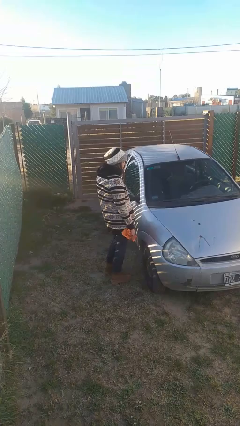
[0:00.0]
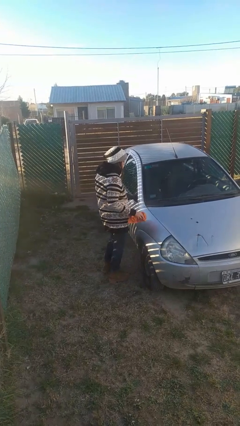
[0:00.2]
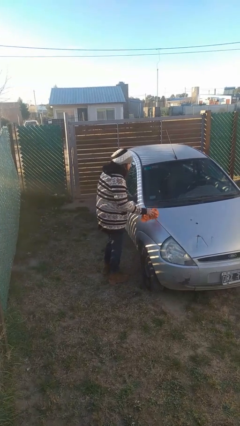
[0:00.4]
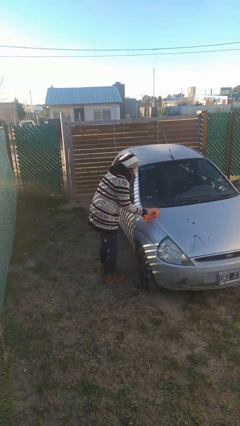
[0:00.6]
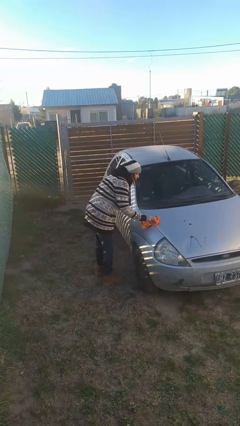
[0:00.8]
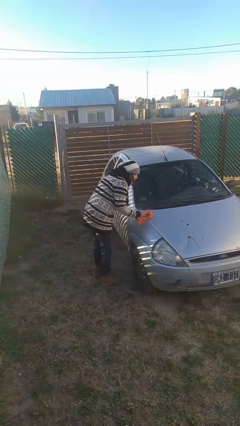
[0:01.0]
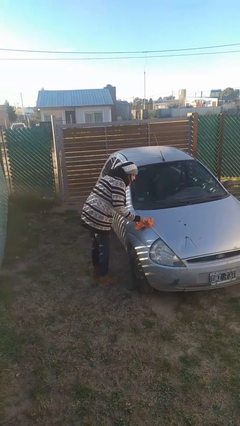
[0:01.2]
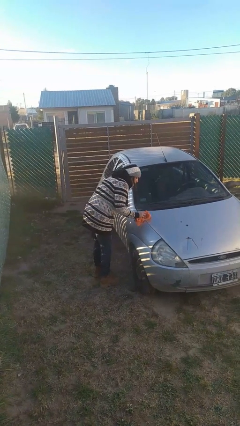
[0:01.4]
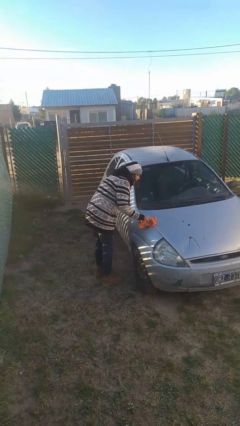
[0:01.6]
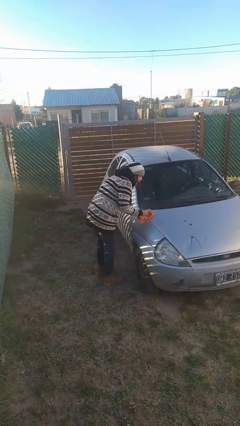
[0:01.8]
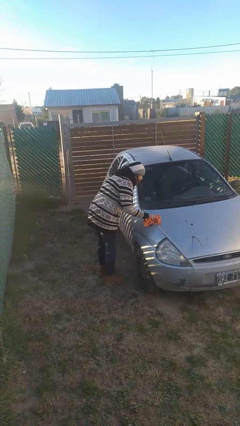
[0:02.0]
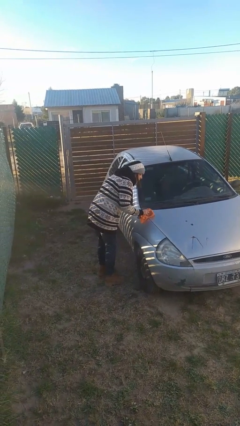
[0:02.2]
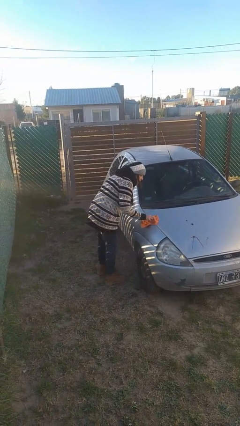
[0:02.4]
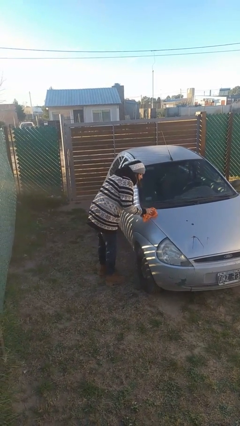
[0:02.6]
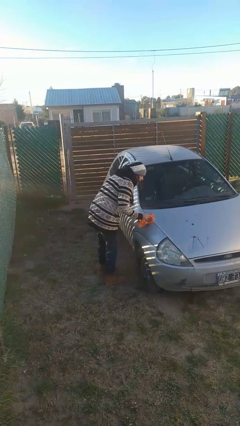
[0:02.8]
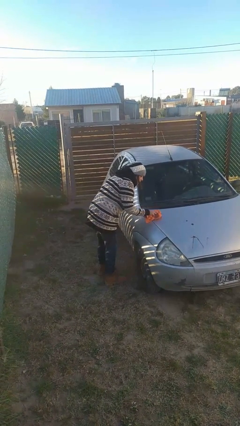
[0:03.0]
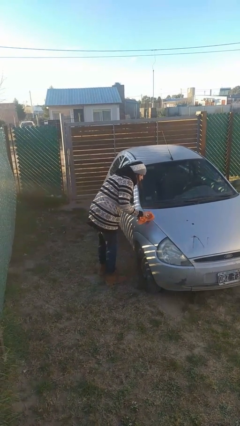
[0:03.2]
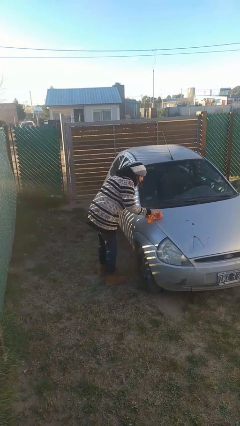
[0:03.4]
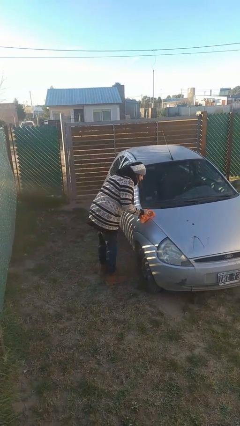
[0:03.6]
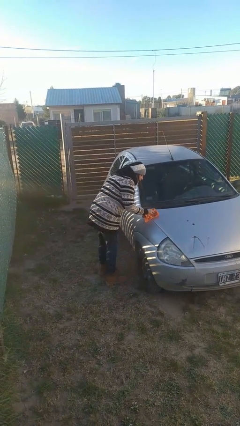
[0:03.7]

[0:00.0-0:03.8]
person polishes car with rag

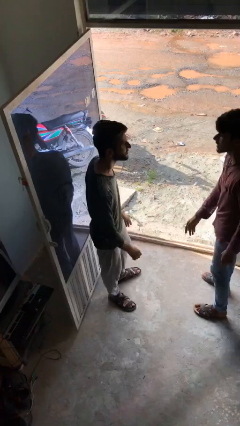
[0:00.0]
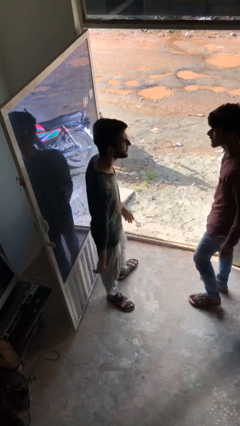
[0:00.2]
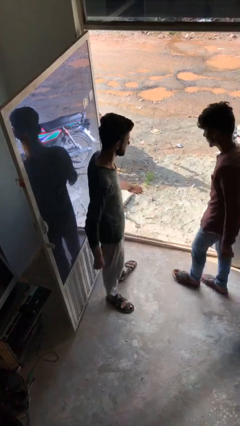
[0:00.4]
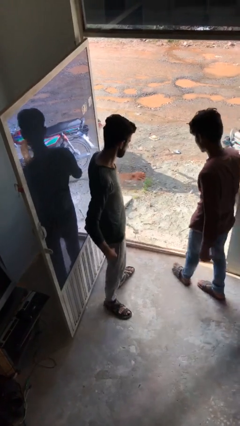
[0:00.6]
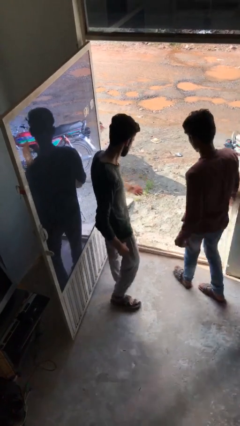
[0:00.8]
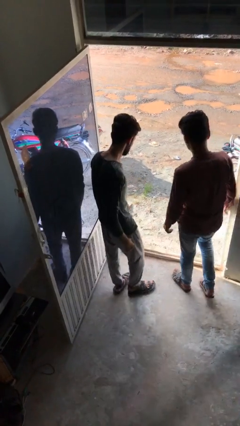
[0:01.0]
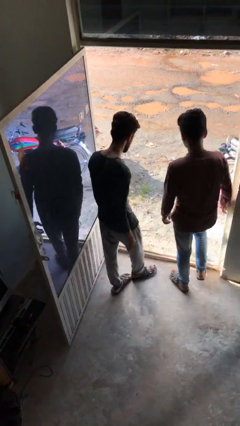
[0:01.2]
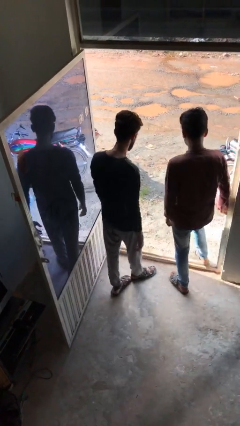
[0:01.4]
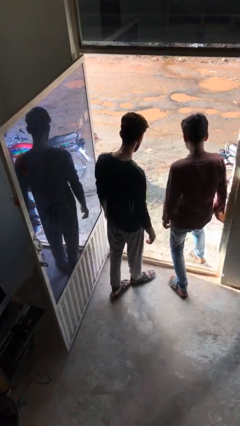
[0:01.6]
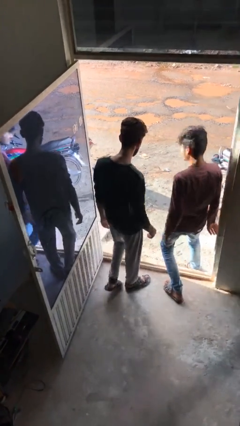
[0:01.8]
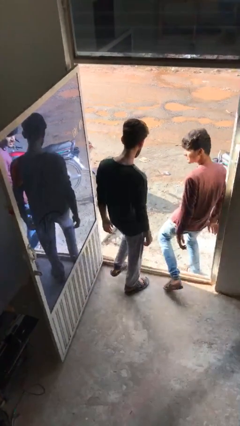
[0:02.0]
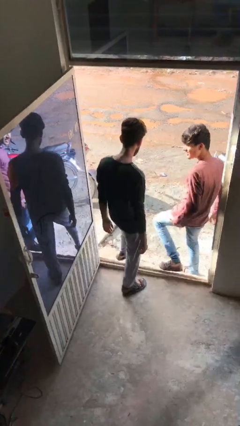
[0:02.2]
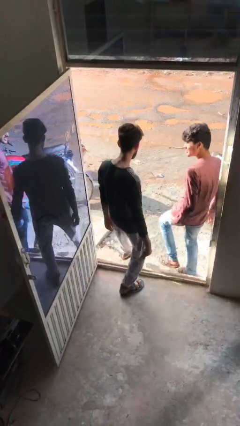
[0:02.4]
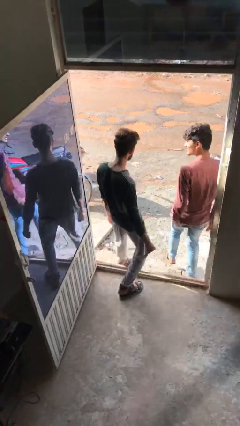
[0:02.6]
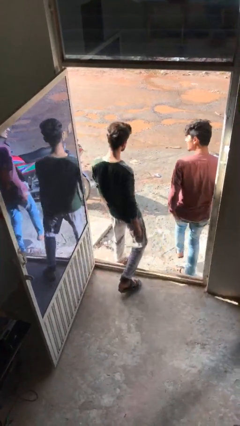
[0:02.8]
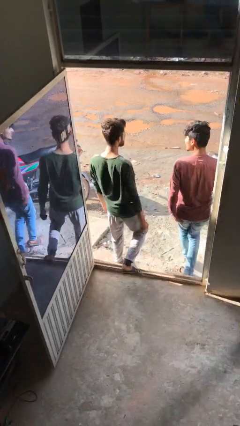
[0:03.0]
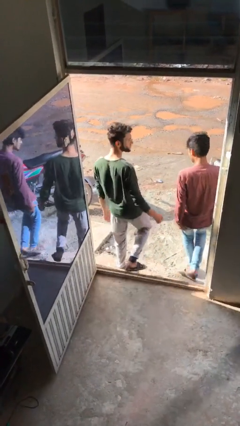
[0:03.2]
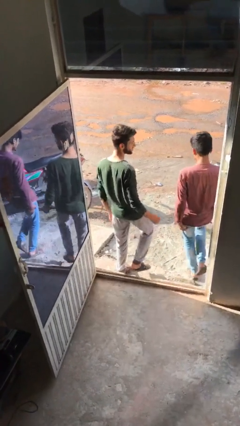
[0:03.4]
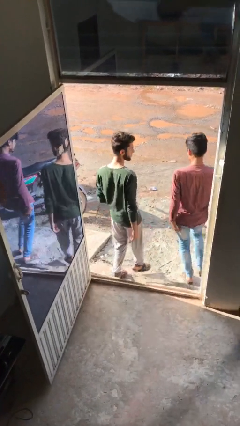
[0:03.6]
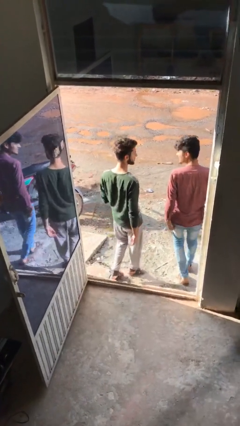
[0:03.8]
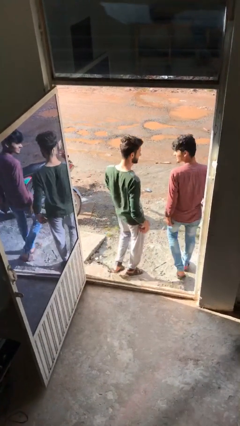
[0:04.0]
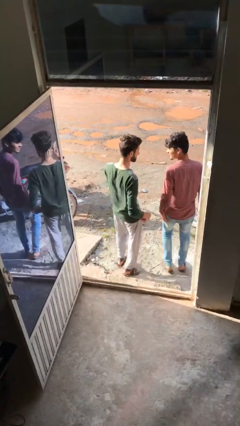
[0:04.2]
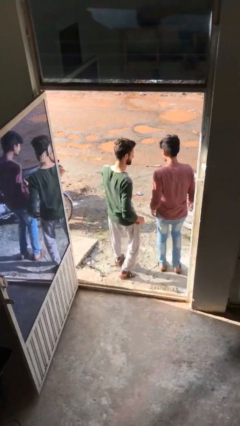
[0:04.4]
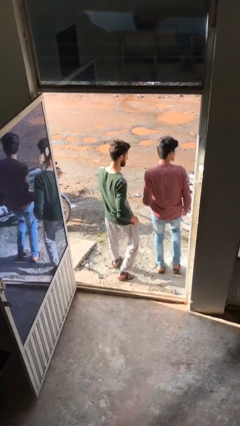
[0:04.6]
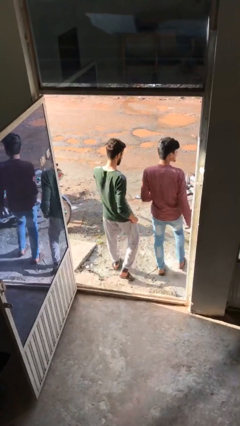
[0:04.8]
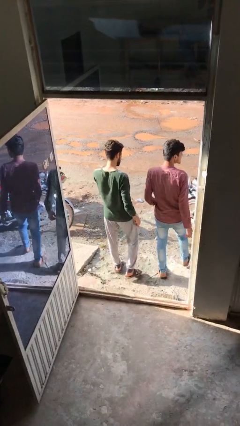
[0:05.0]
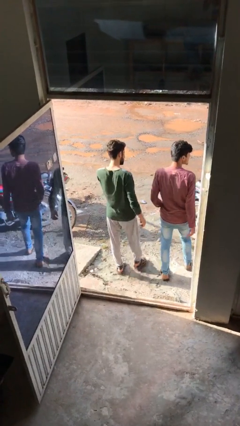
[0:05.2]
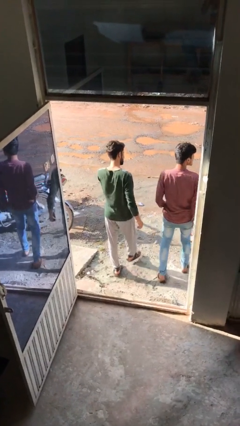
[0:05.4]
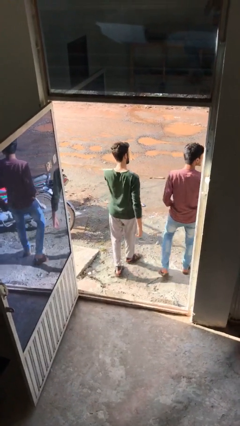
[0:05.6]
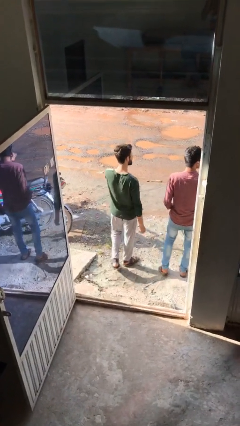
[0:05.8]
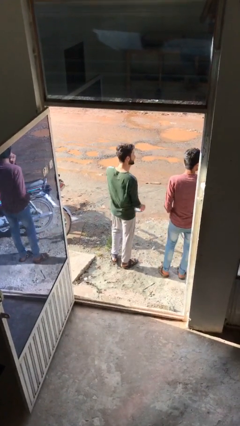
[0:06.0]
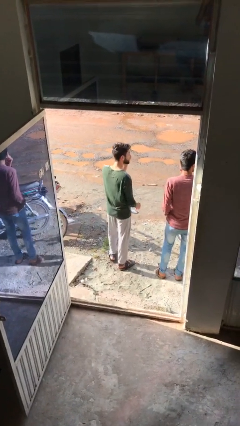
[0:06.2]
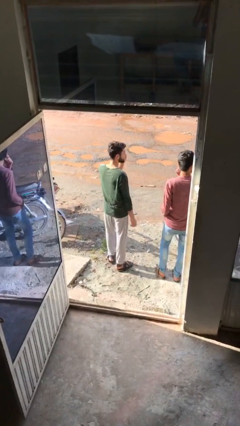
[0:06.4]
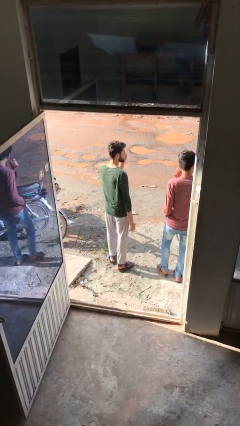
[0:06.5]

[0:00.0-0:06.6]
person talks to person

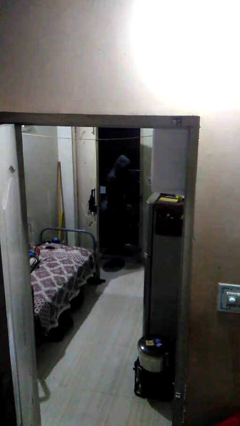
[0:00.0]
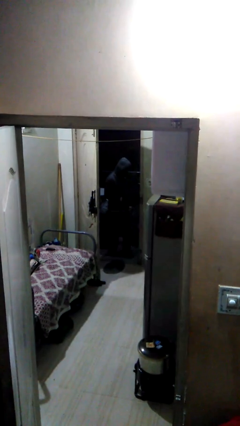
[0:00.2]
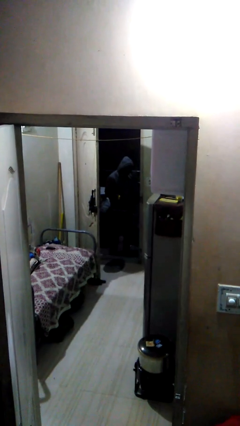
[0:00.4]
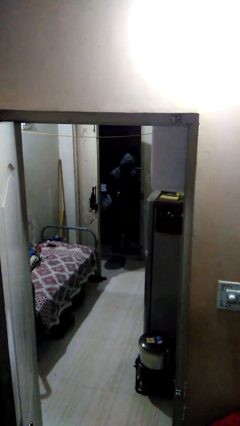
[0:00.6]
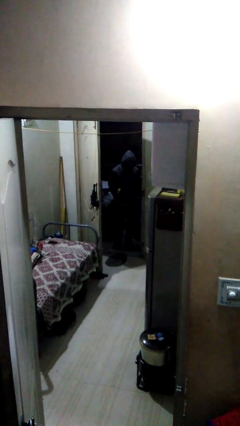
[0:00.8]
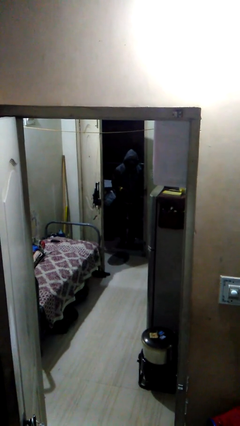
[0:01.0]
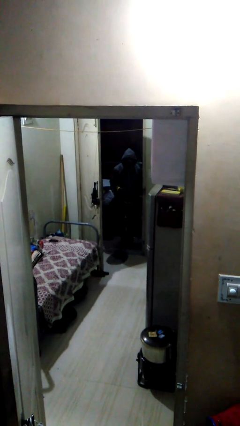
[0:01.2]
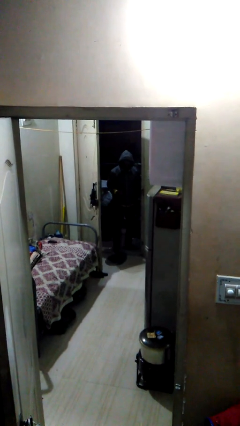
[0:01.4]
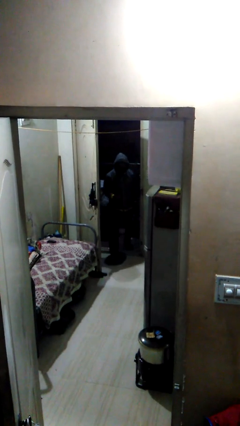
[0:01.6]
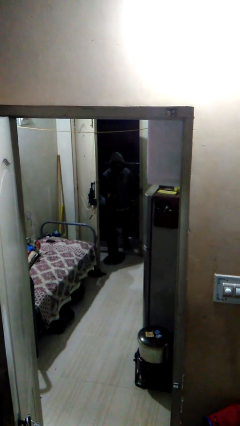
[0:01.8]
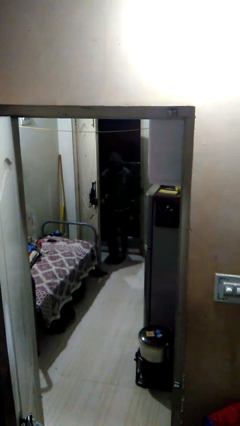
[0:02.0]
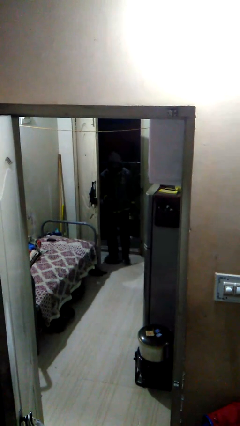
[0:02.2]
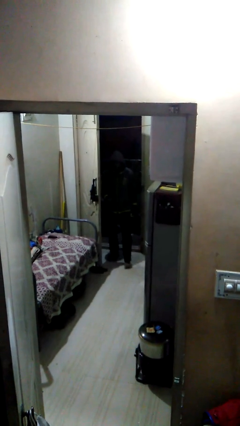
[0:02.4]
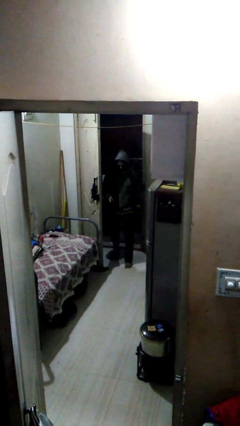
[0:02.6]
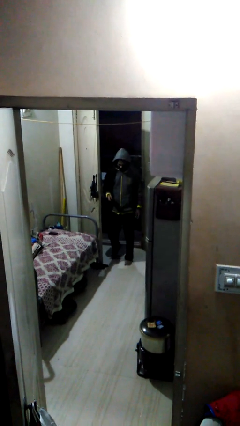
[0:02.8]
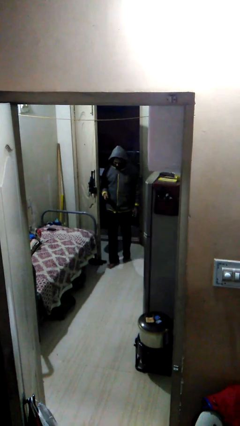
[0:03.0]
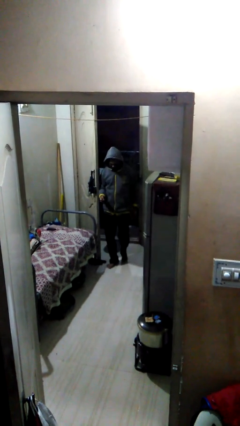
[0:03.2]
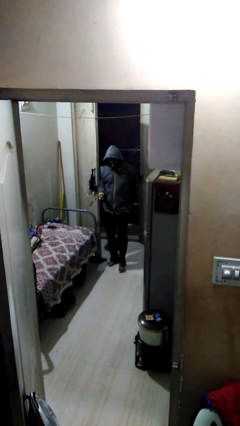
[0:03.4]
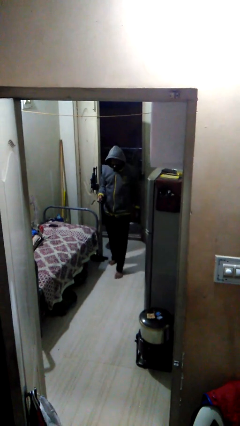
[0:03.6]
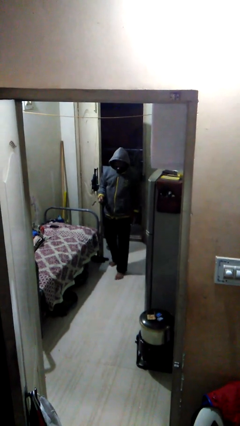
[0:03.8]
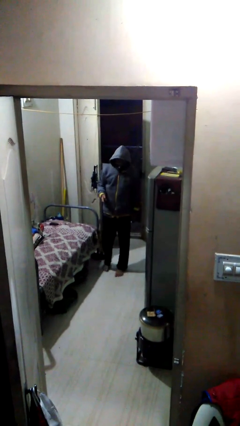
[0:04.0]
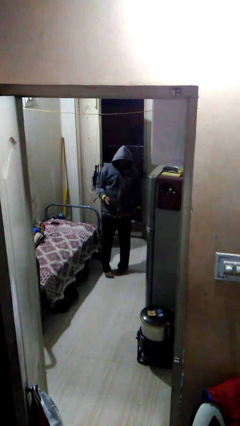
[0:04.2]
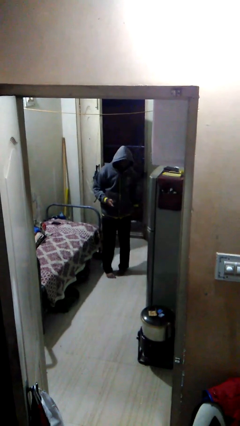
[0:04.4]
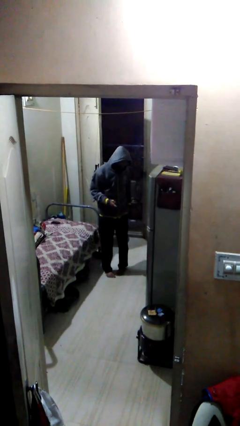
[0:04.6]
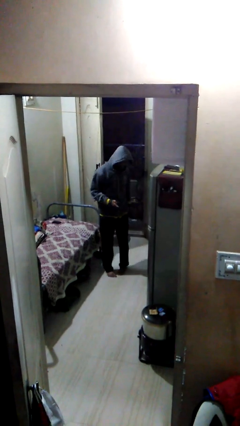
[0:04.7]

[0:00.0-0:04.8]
person enters scene through structure

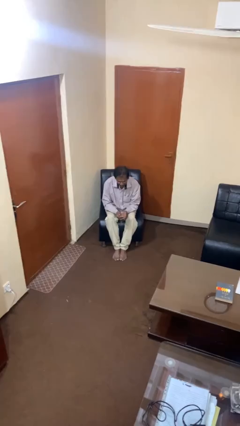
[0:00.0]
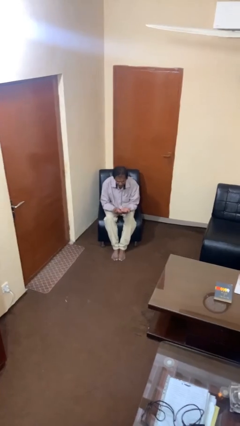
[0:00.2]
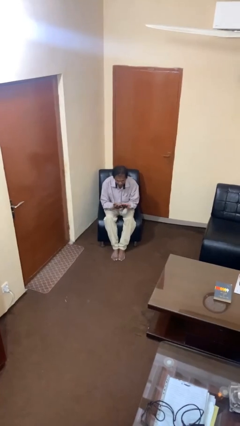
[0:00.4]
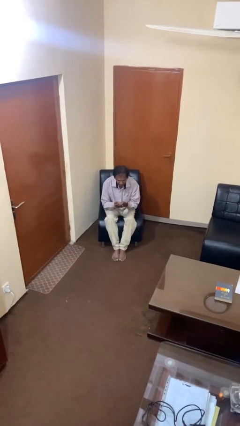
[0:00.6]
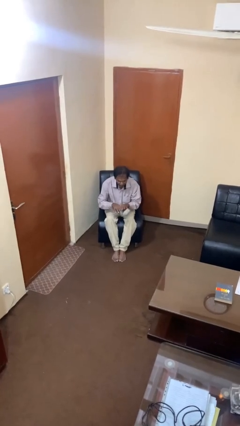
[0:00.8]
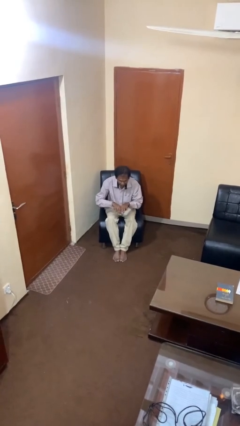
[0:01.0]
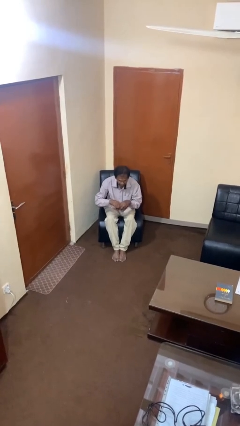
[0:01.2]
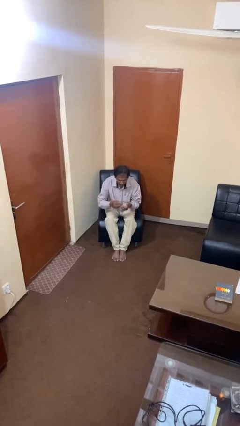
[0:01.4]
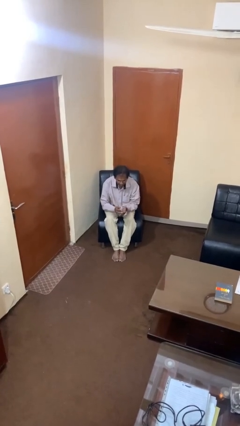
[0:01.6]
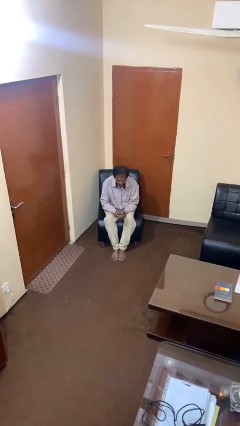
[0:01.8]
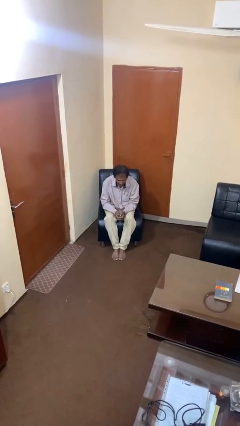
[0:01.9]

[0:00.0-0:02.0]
person looks at hands in lap

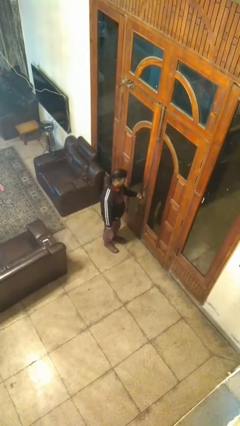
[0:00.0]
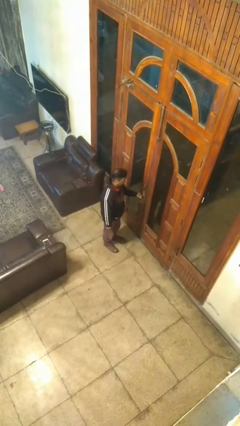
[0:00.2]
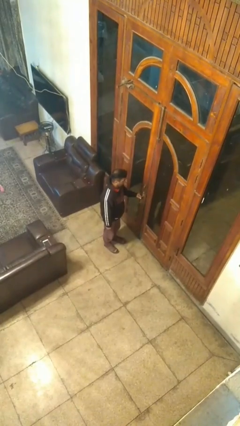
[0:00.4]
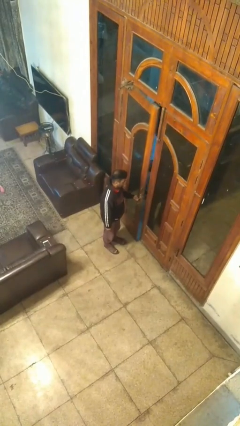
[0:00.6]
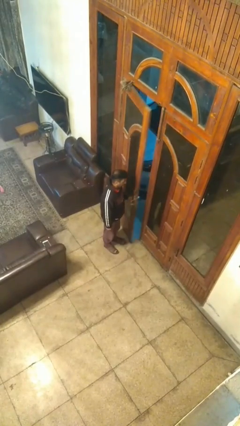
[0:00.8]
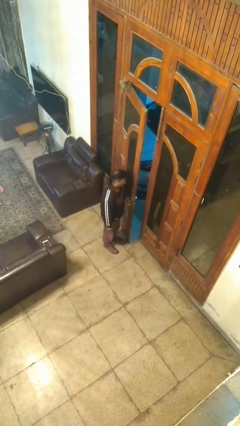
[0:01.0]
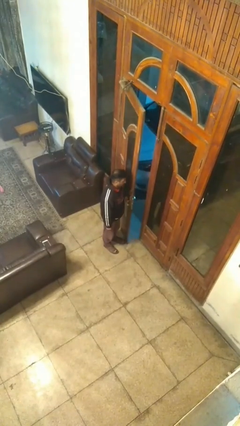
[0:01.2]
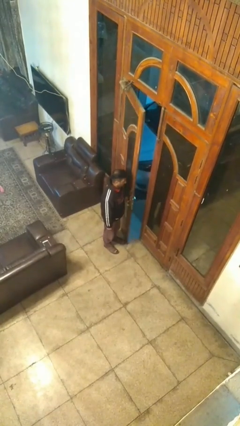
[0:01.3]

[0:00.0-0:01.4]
person opens facility door
